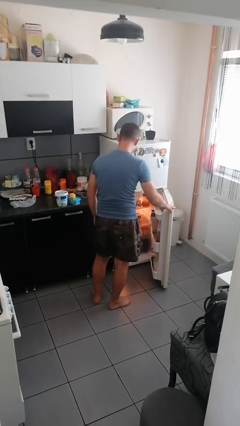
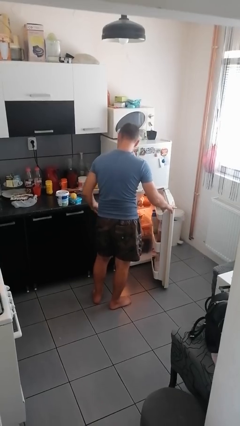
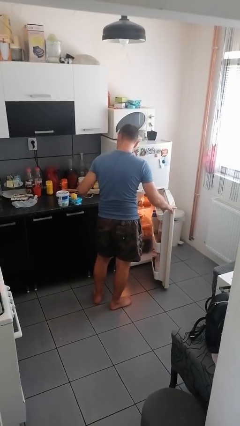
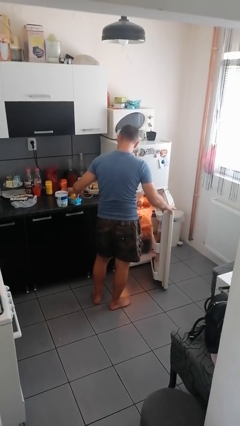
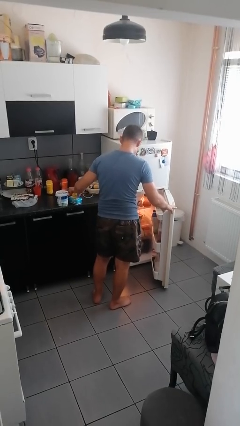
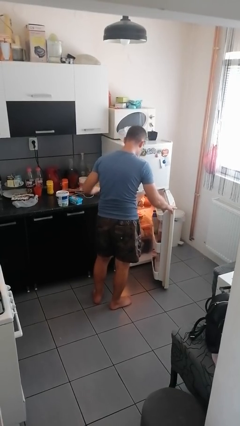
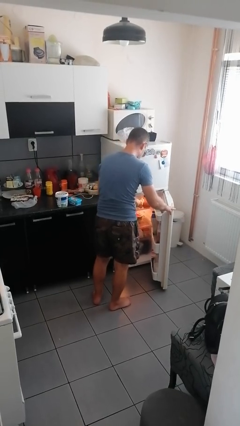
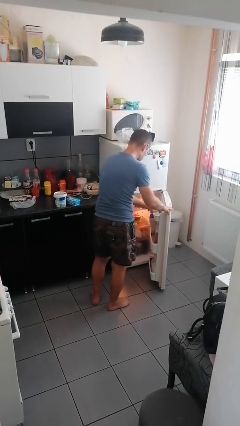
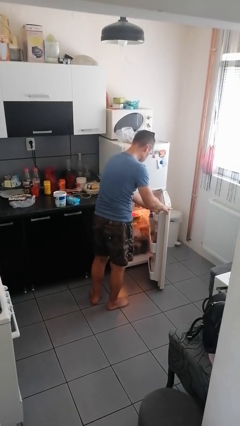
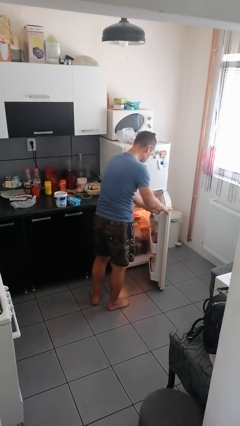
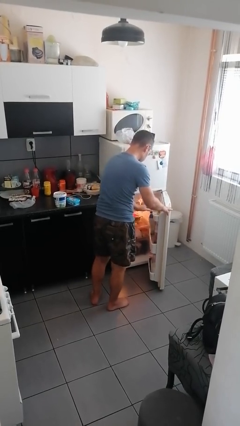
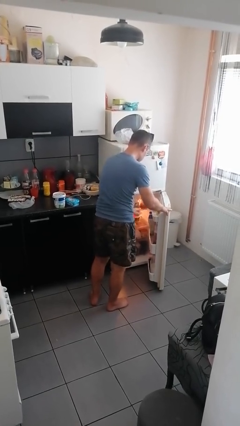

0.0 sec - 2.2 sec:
person loads groceries into refrigerator

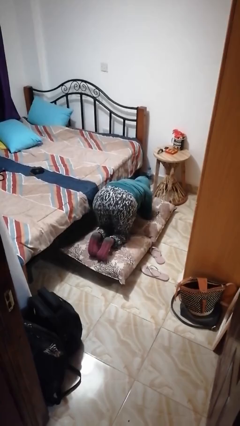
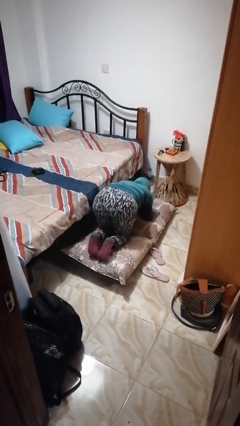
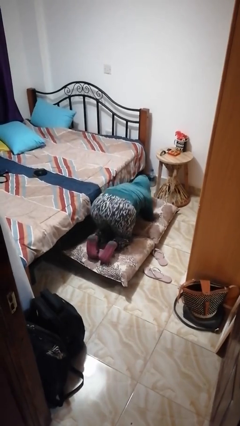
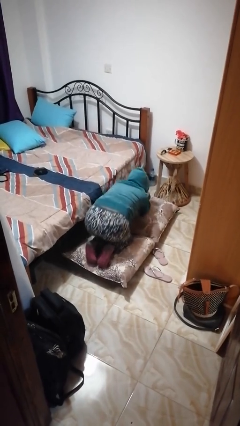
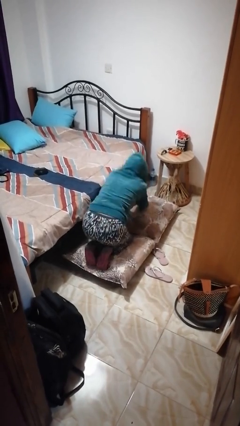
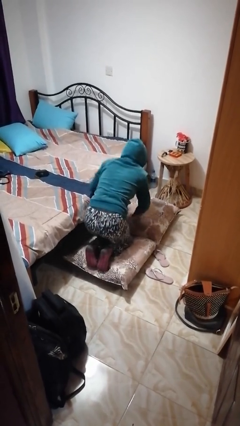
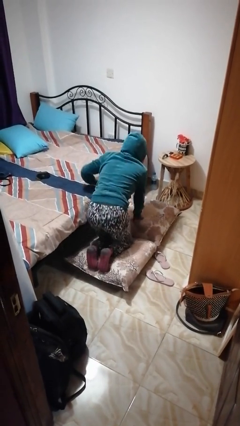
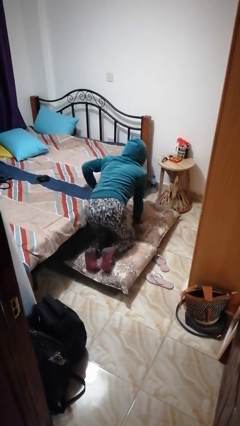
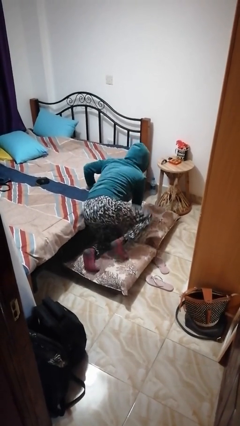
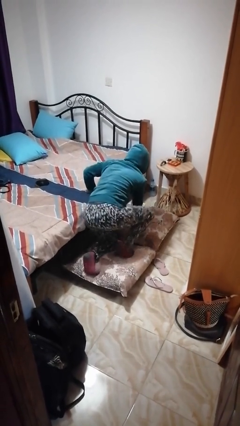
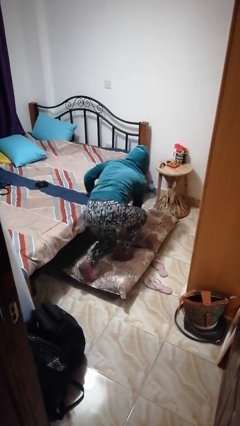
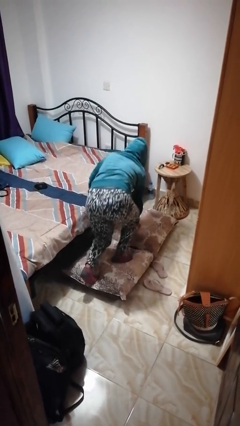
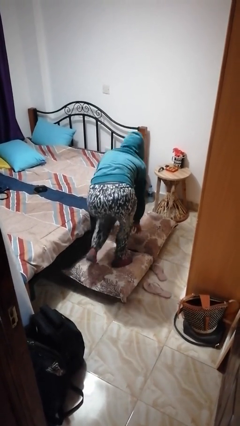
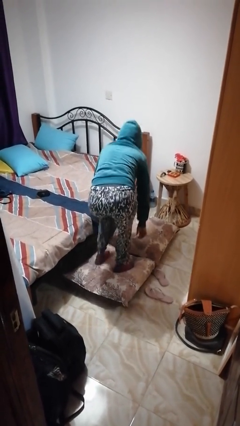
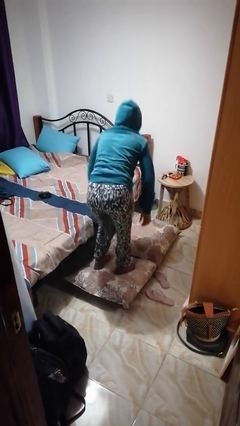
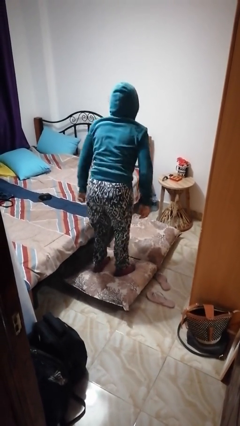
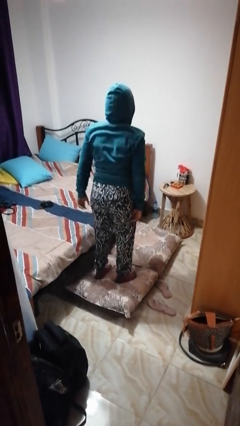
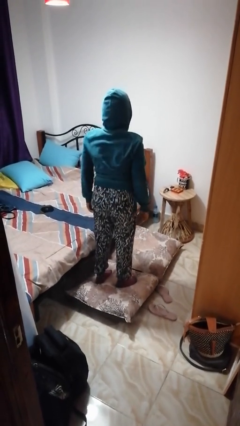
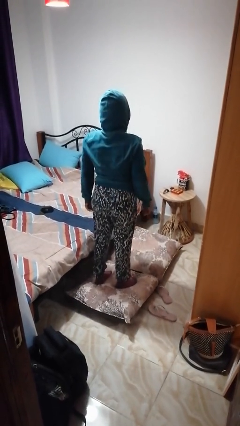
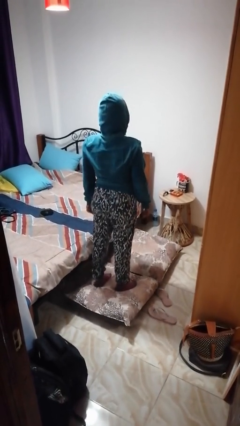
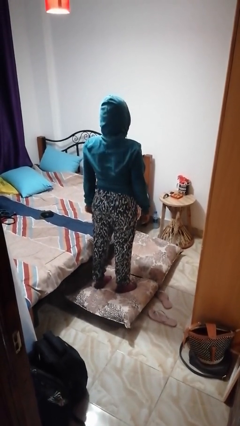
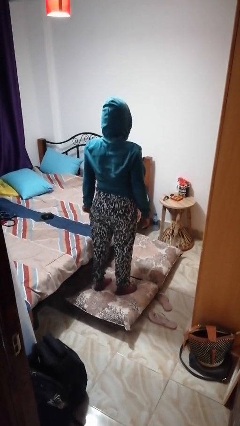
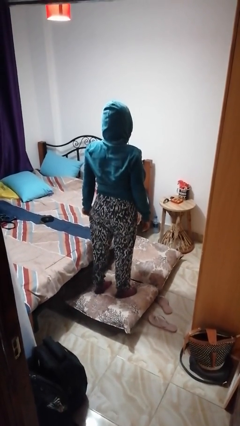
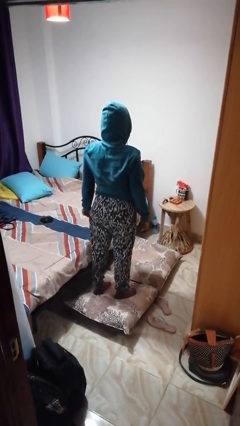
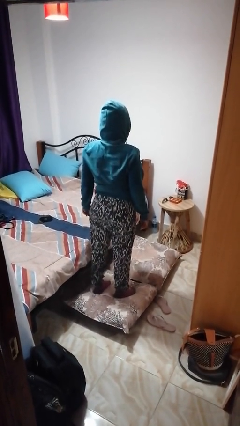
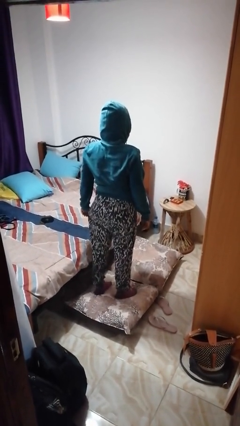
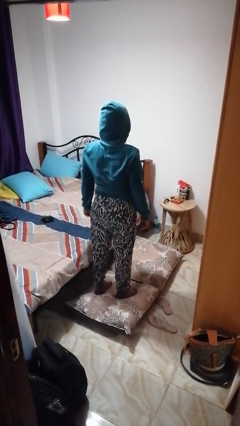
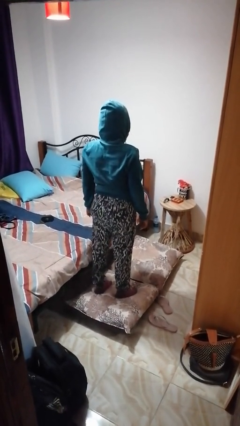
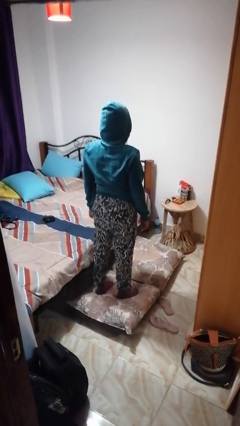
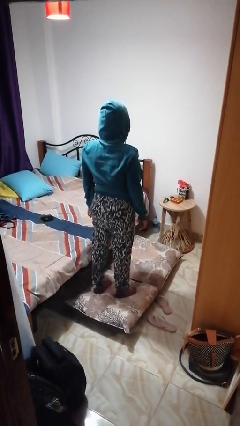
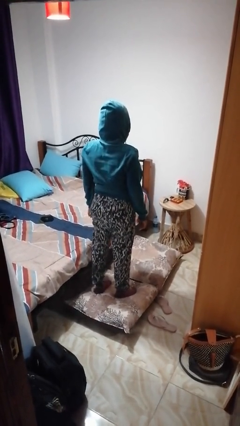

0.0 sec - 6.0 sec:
person stands up from floor

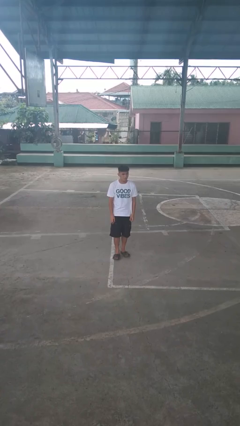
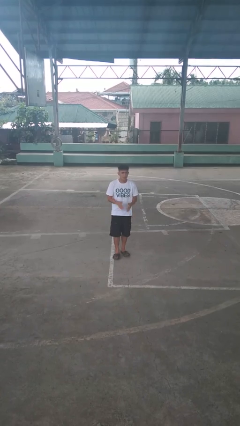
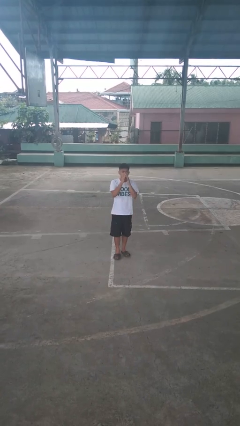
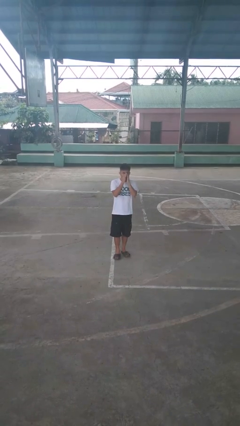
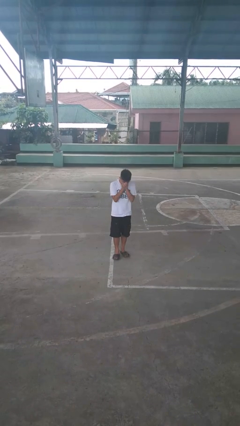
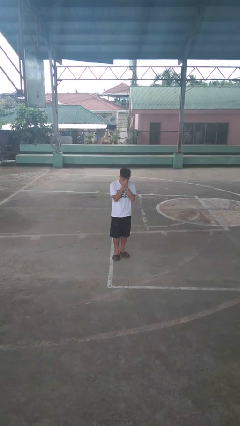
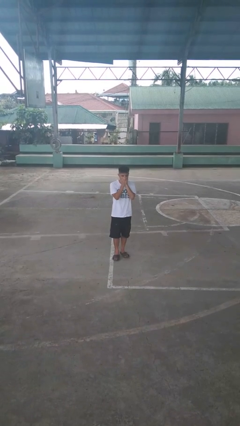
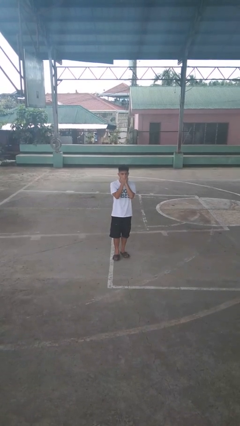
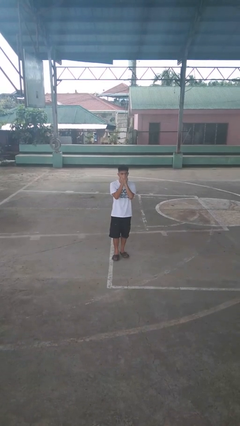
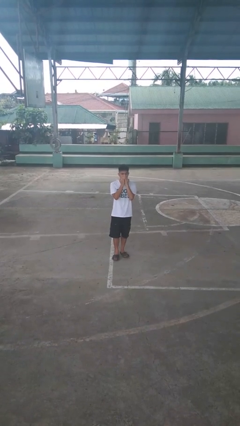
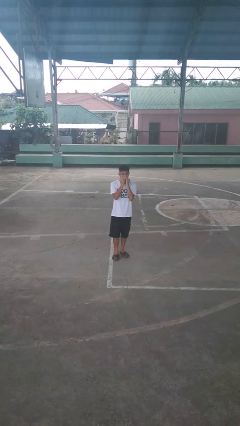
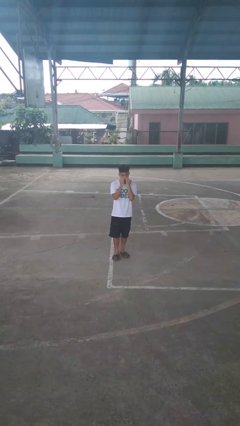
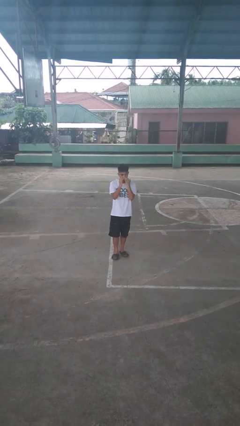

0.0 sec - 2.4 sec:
person sneezes into hand

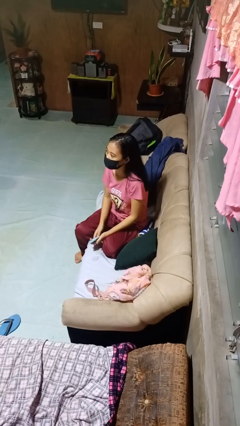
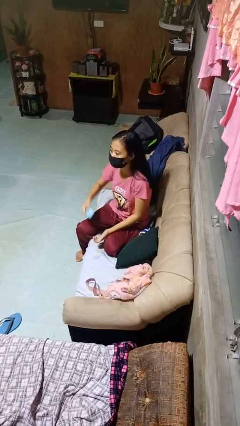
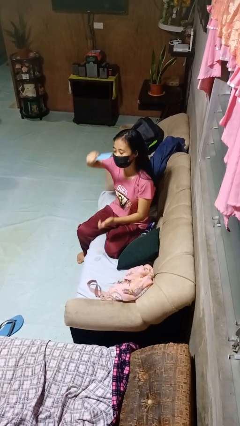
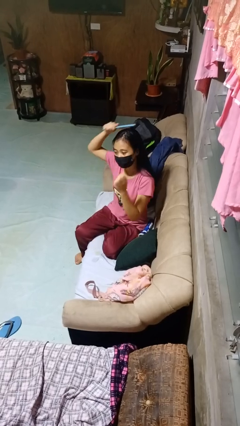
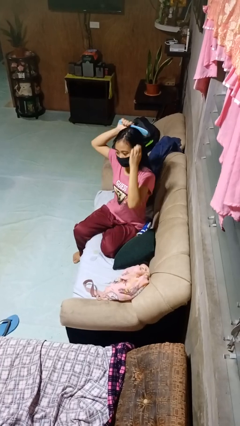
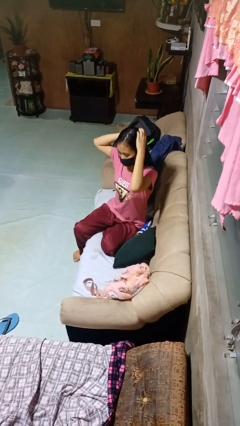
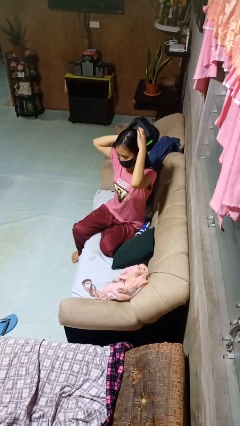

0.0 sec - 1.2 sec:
person brushes hair

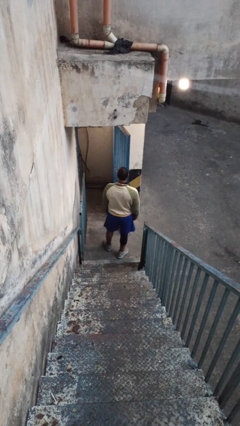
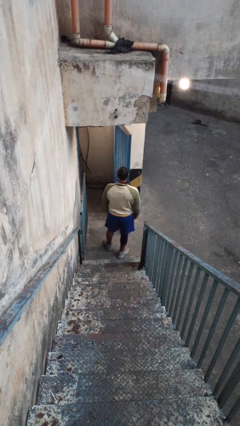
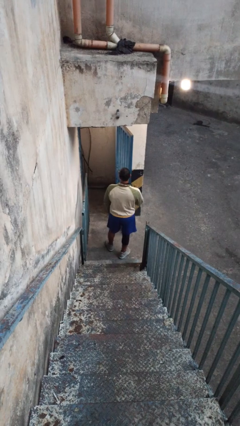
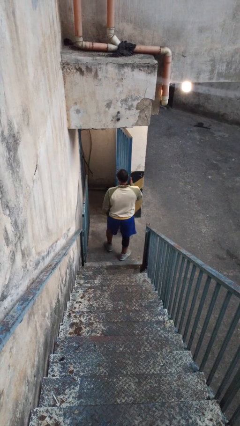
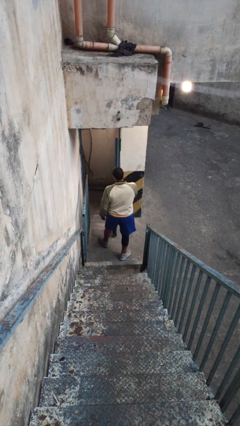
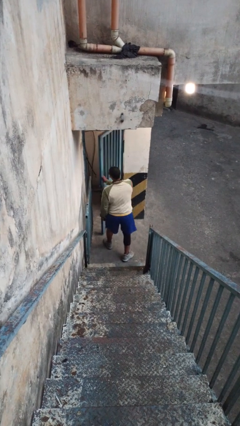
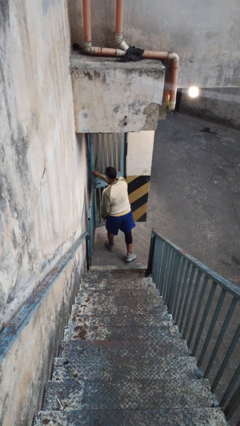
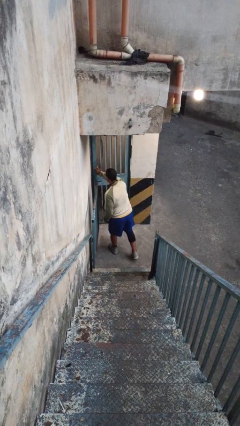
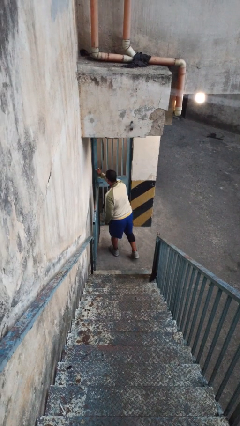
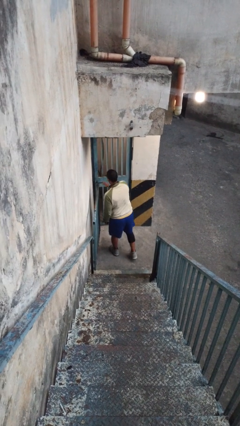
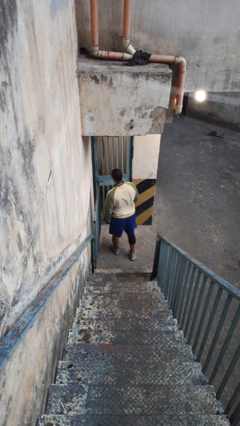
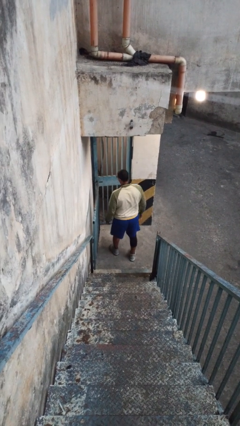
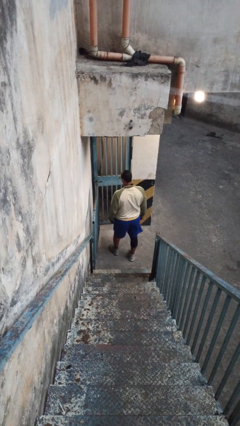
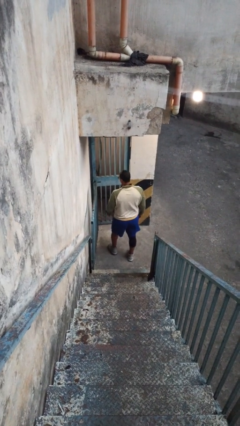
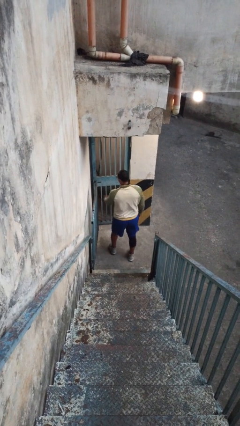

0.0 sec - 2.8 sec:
person closes facility door

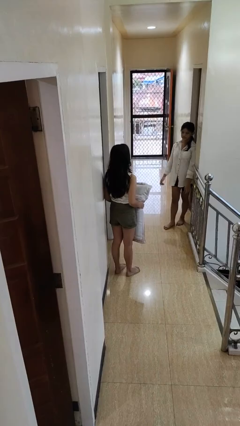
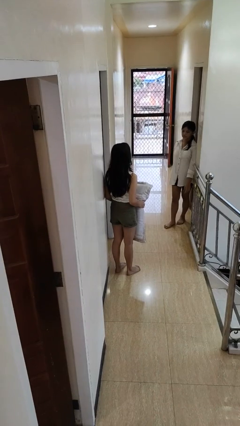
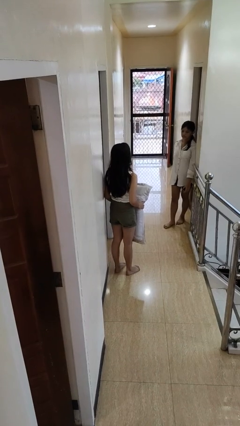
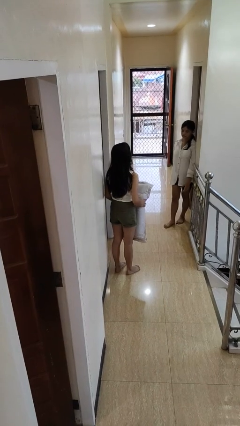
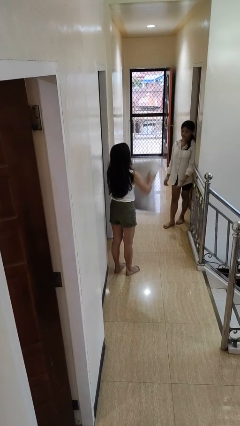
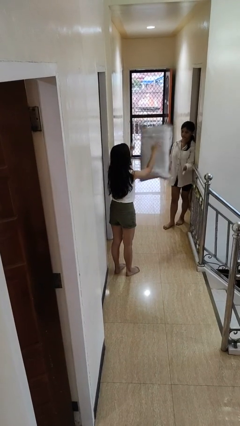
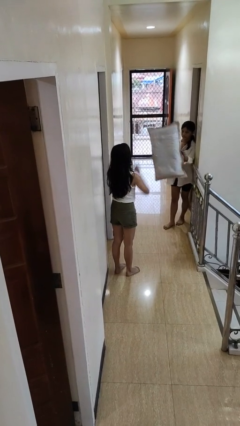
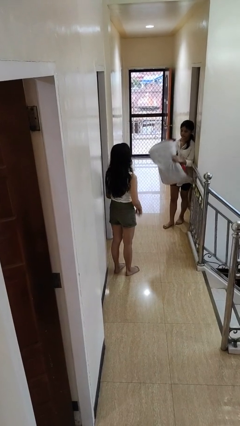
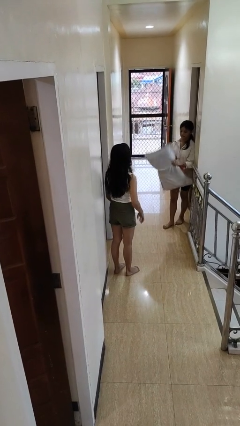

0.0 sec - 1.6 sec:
person throws object to person

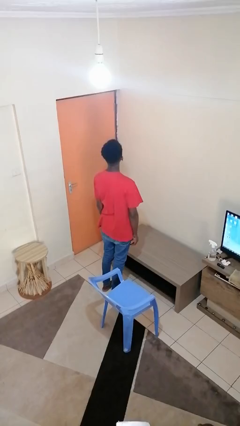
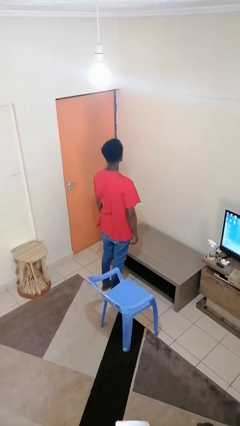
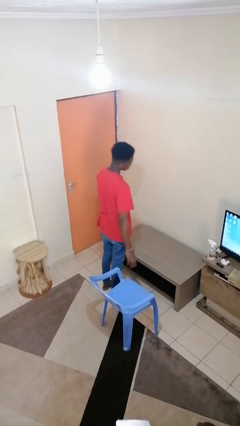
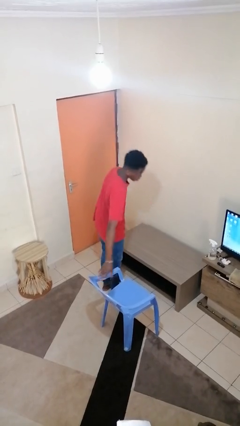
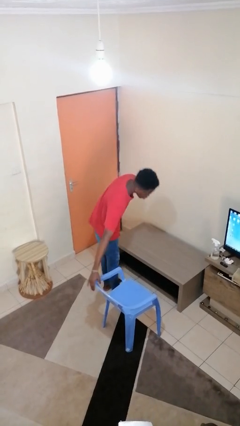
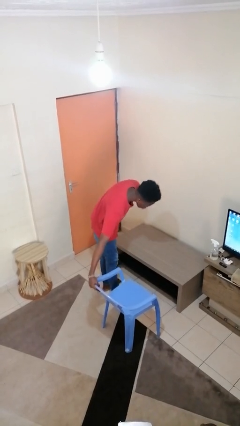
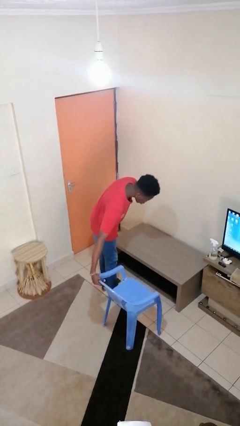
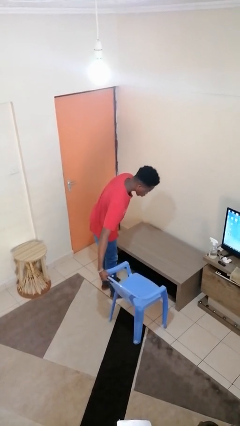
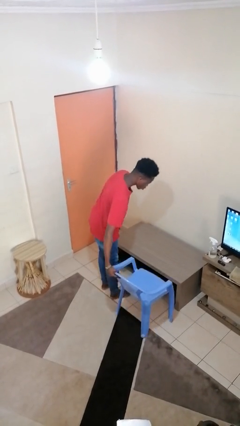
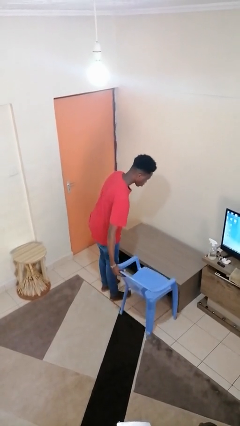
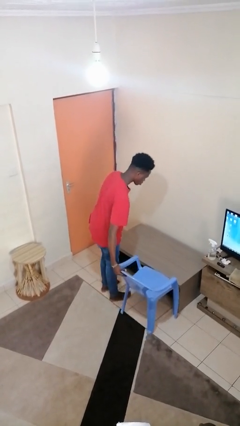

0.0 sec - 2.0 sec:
person pushes in chair
